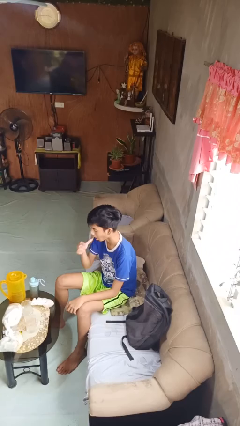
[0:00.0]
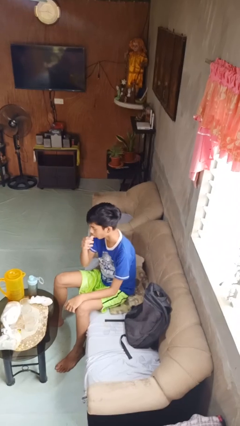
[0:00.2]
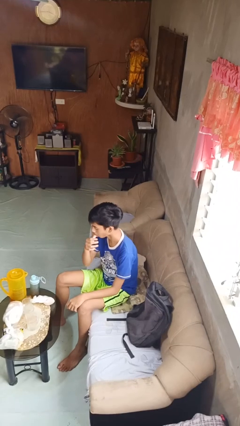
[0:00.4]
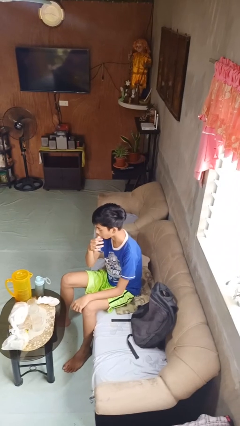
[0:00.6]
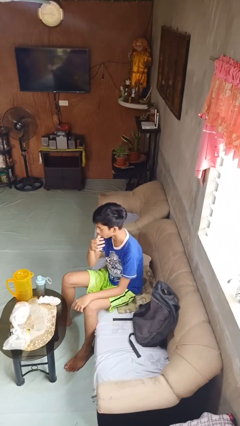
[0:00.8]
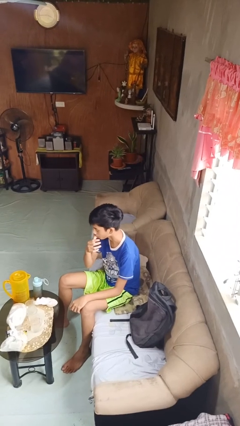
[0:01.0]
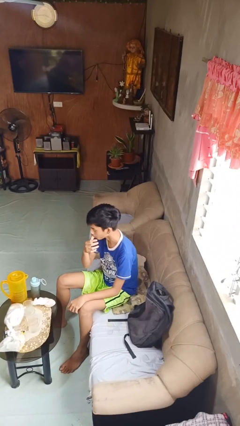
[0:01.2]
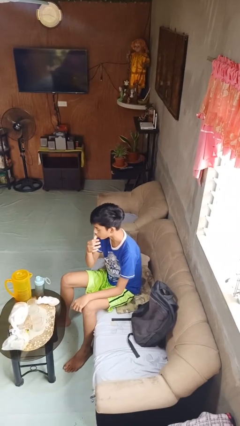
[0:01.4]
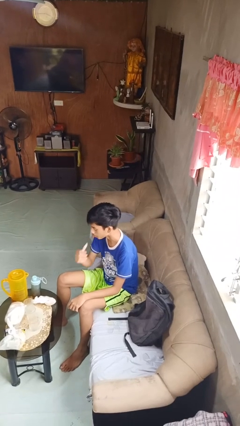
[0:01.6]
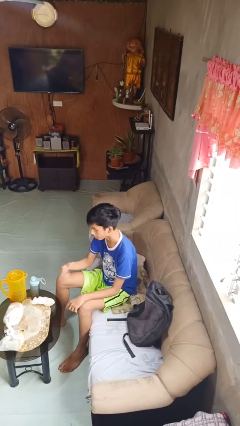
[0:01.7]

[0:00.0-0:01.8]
person licks fingers

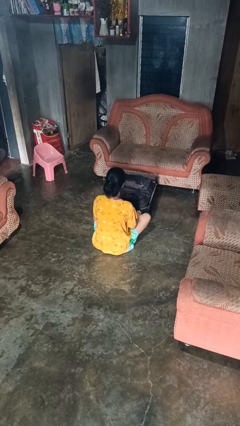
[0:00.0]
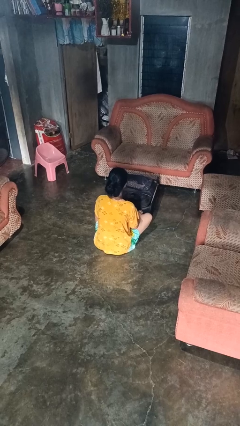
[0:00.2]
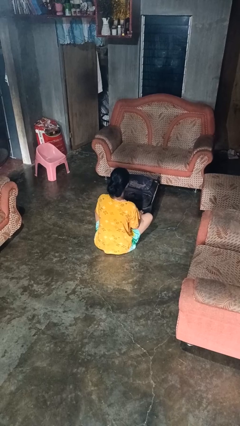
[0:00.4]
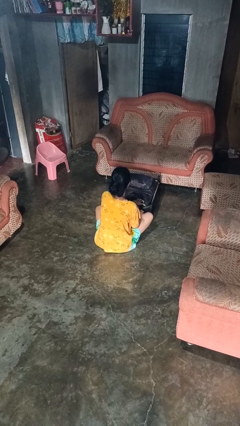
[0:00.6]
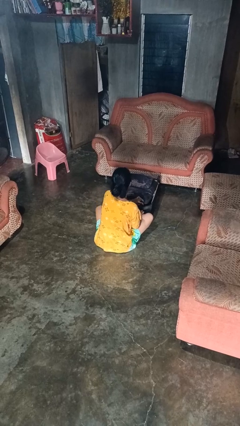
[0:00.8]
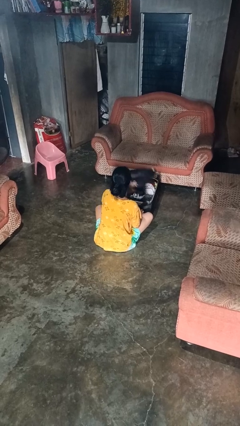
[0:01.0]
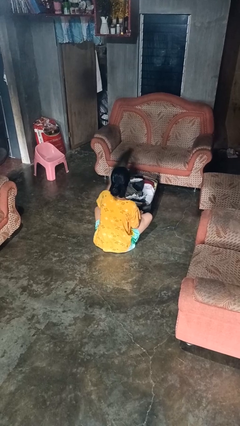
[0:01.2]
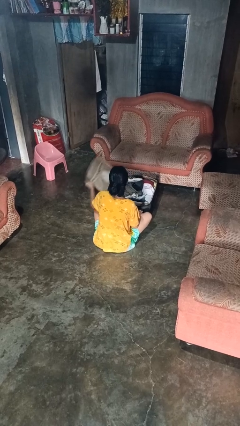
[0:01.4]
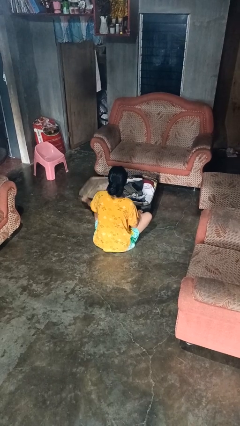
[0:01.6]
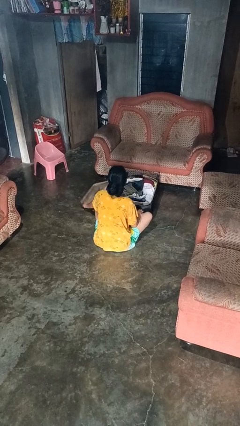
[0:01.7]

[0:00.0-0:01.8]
person opens suitcase

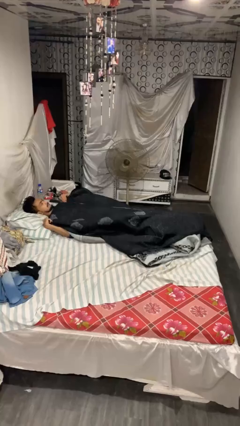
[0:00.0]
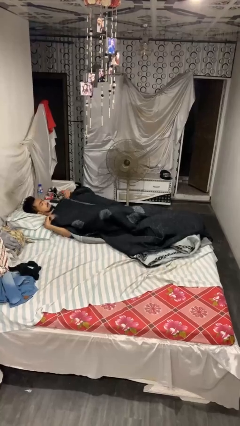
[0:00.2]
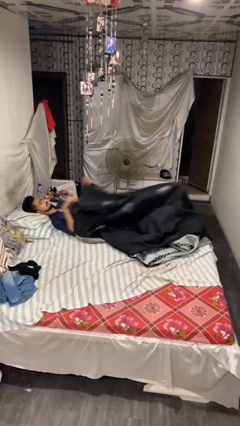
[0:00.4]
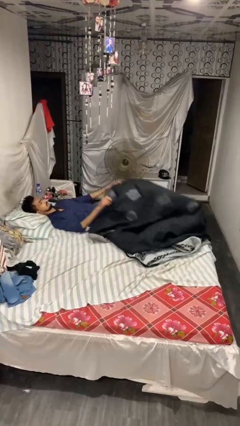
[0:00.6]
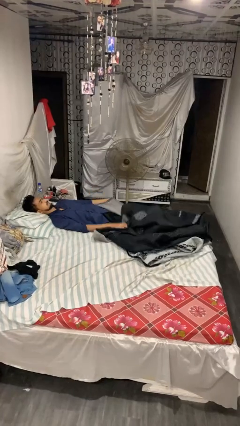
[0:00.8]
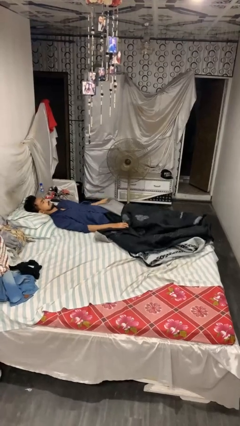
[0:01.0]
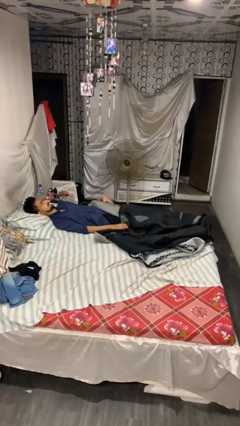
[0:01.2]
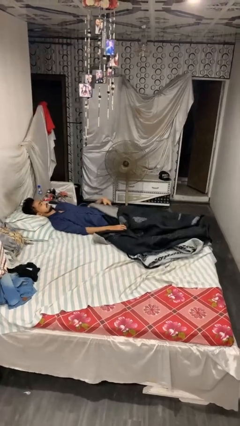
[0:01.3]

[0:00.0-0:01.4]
person uncovers with blanket

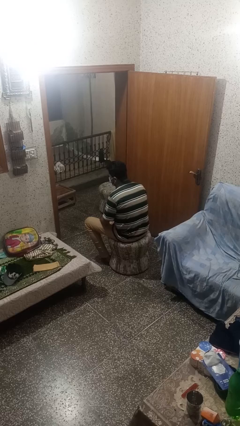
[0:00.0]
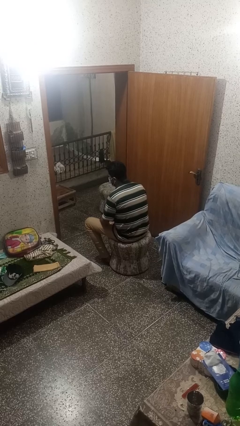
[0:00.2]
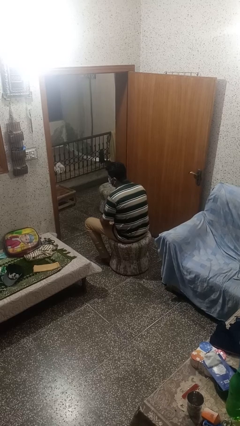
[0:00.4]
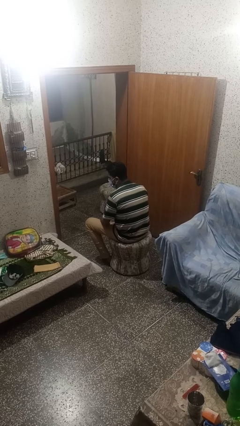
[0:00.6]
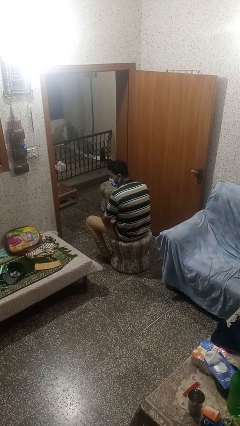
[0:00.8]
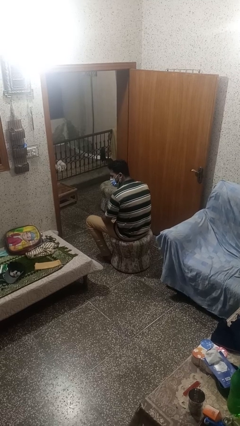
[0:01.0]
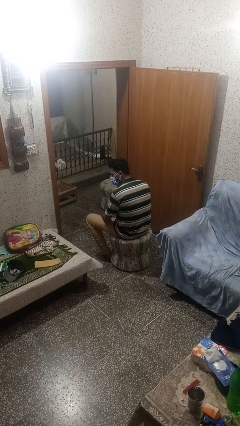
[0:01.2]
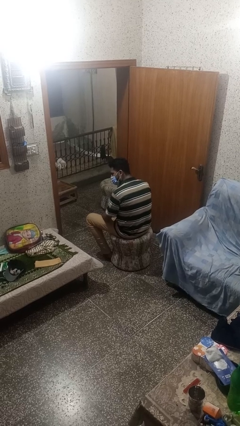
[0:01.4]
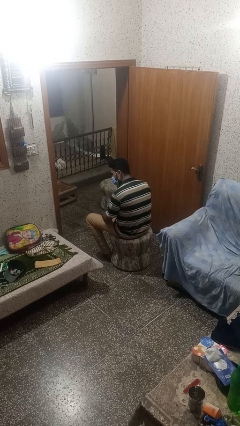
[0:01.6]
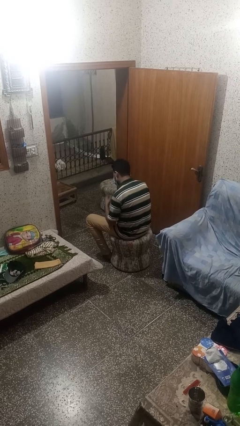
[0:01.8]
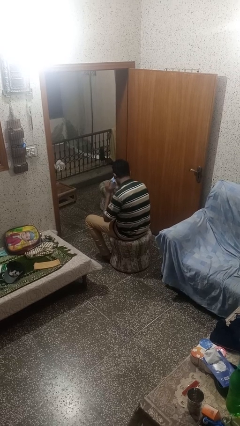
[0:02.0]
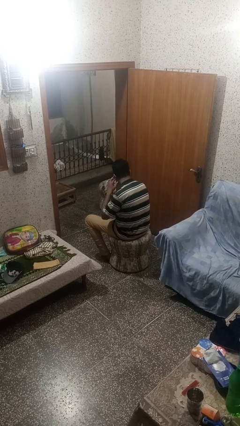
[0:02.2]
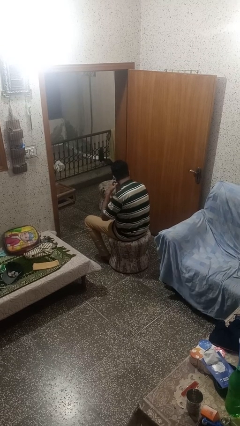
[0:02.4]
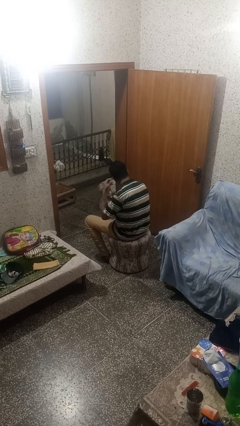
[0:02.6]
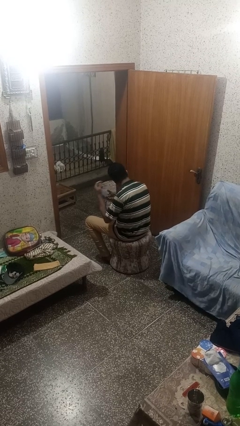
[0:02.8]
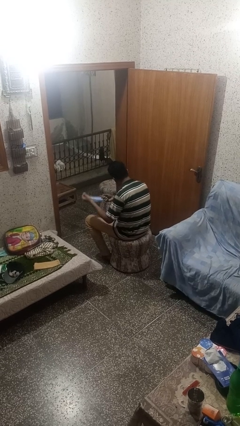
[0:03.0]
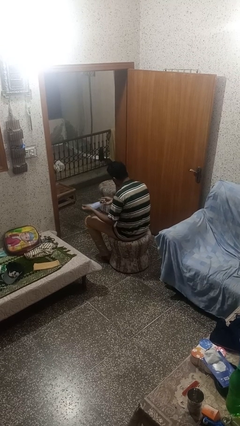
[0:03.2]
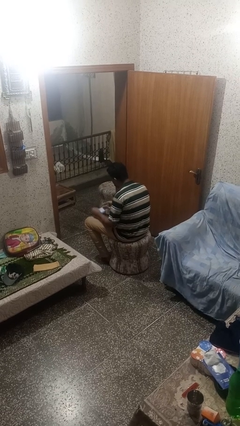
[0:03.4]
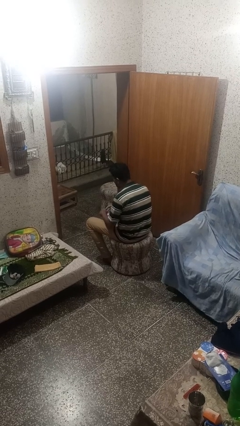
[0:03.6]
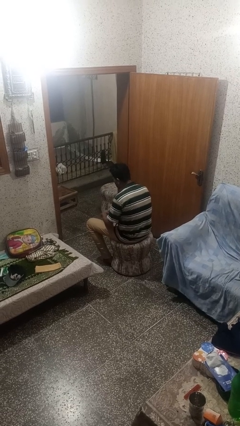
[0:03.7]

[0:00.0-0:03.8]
person takes off facemask

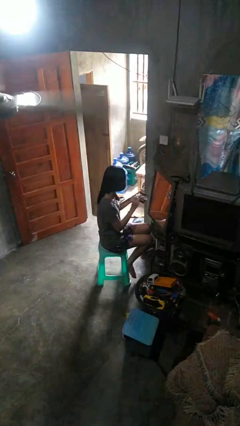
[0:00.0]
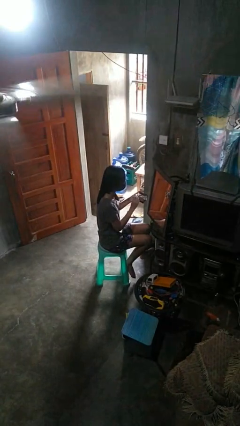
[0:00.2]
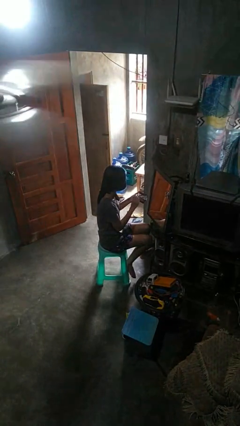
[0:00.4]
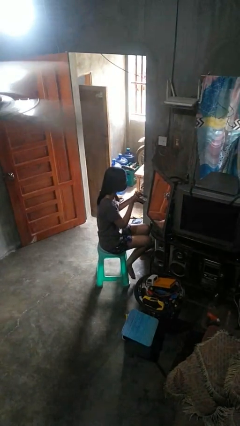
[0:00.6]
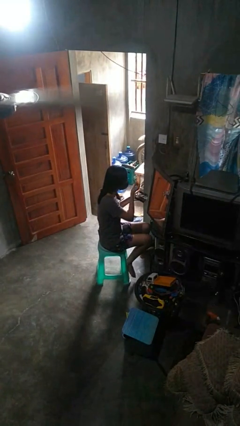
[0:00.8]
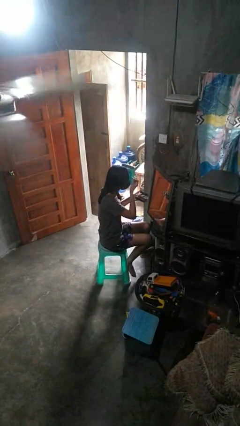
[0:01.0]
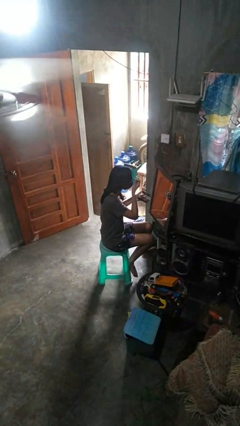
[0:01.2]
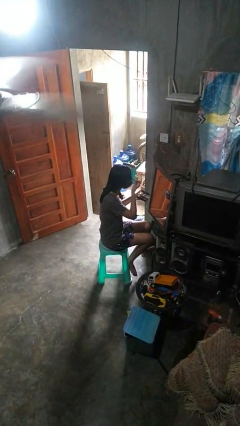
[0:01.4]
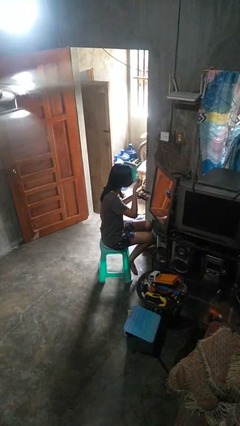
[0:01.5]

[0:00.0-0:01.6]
person applies eye makeup

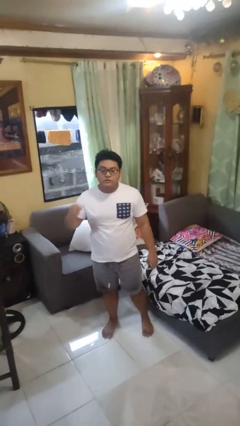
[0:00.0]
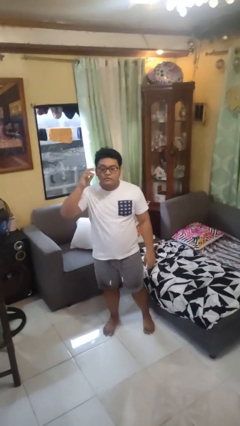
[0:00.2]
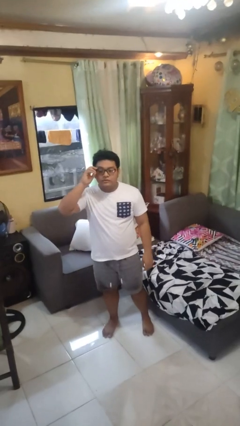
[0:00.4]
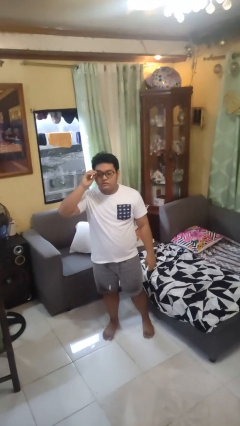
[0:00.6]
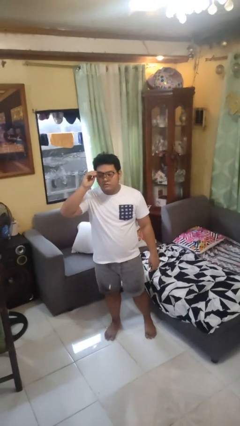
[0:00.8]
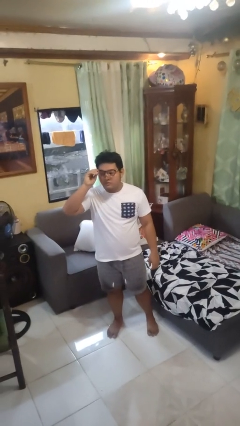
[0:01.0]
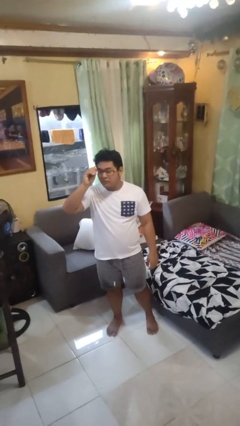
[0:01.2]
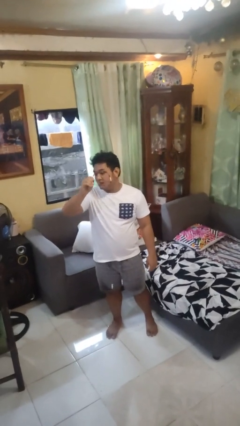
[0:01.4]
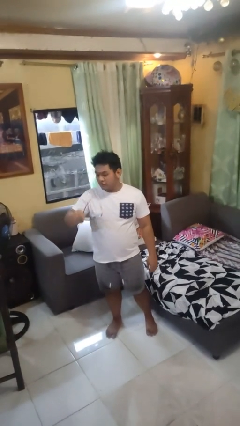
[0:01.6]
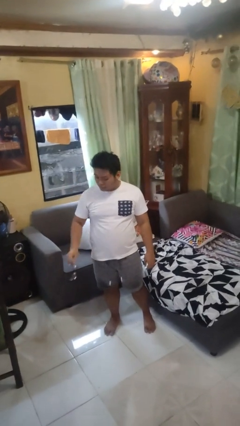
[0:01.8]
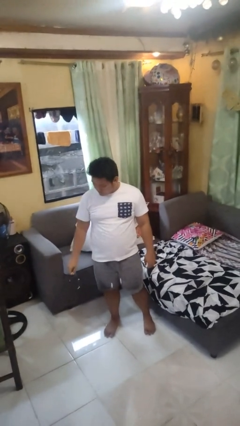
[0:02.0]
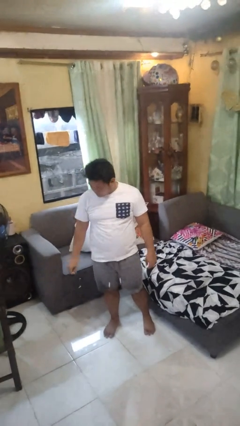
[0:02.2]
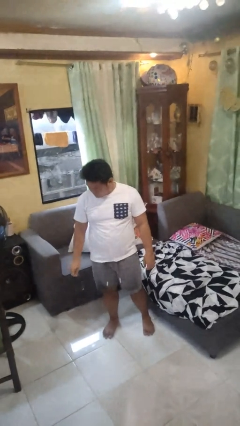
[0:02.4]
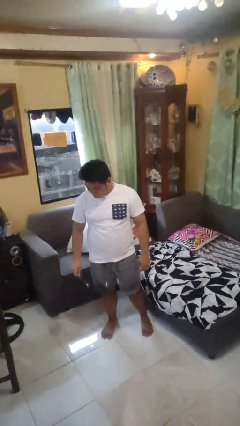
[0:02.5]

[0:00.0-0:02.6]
person takes off glasses

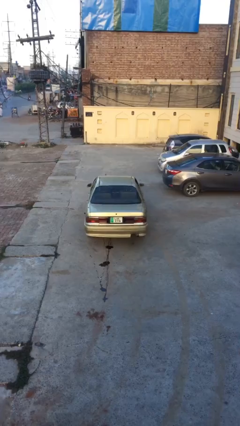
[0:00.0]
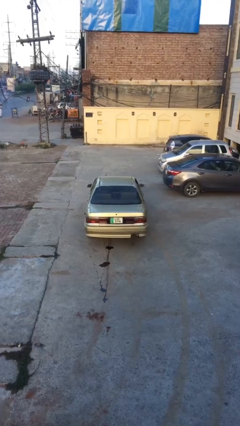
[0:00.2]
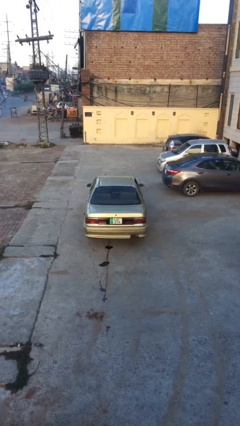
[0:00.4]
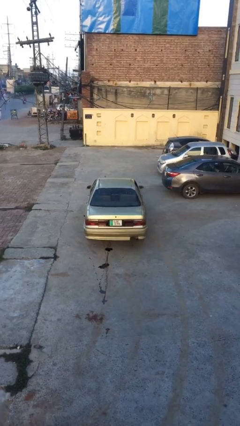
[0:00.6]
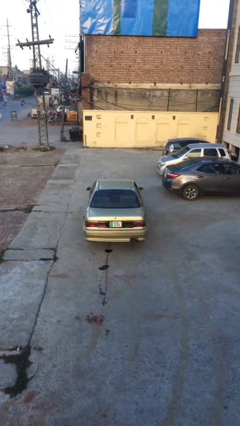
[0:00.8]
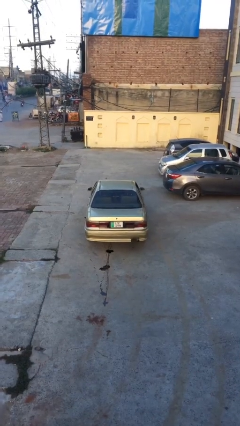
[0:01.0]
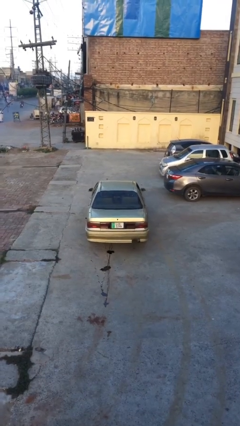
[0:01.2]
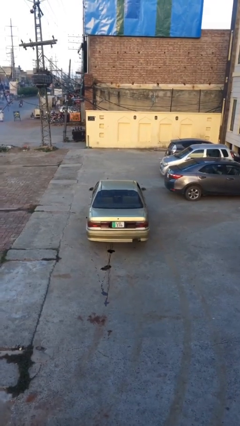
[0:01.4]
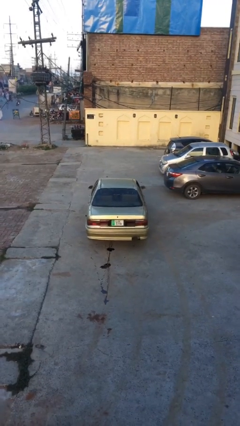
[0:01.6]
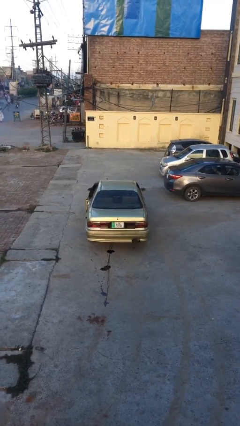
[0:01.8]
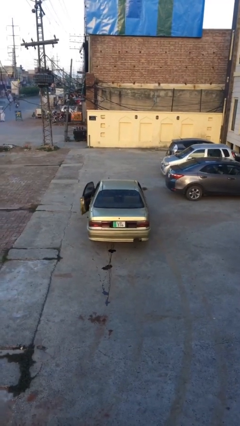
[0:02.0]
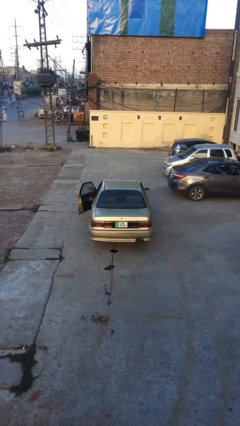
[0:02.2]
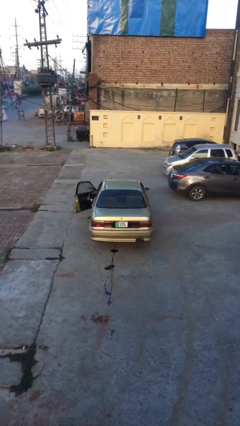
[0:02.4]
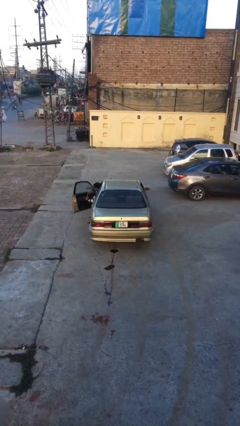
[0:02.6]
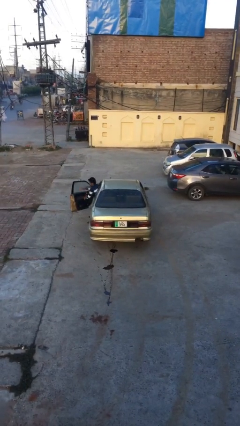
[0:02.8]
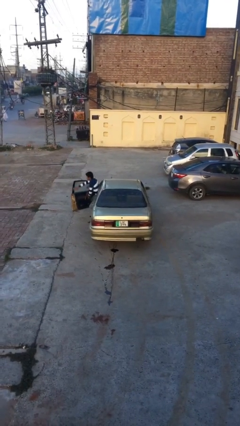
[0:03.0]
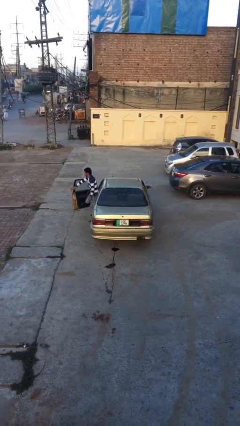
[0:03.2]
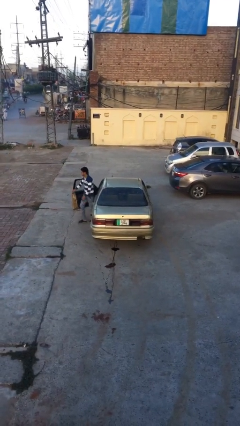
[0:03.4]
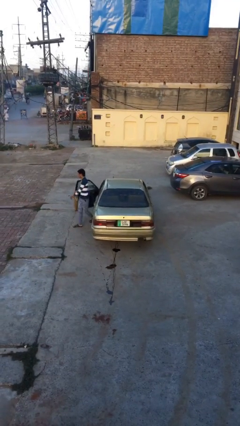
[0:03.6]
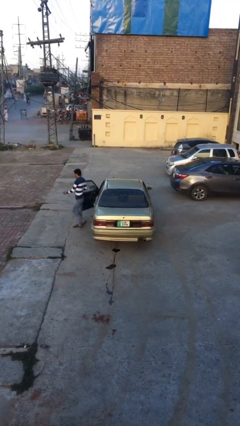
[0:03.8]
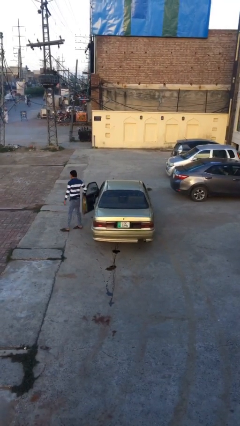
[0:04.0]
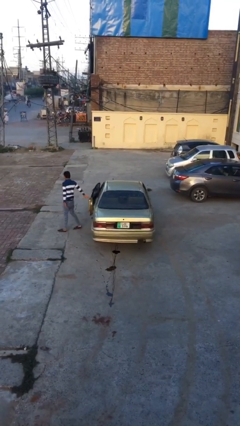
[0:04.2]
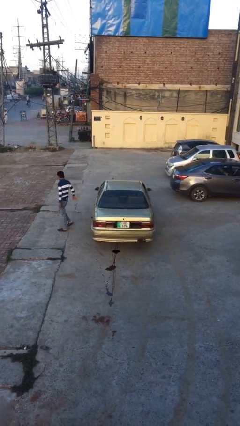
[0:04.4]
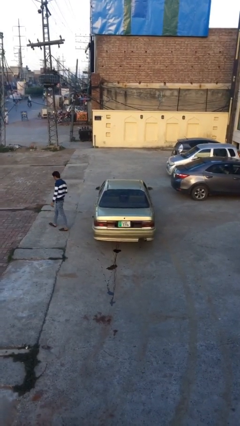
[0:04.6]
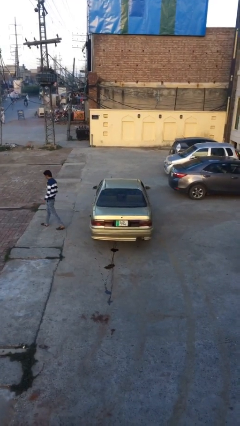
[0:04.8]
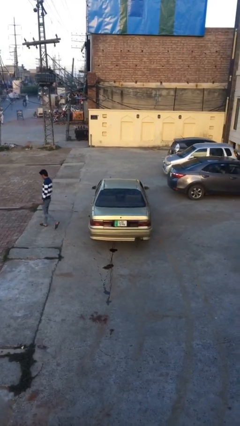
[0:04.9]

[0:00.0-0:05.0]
car drops off person
